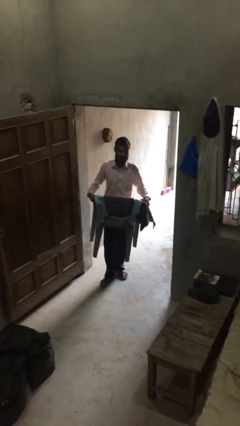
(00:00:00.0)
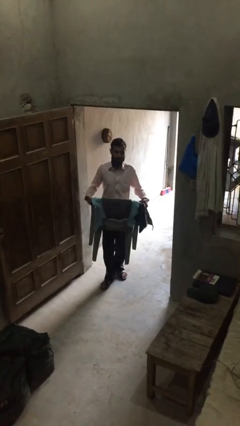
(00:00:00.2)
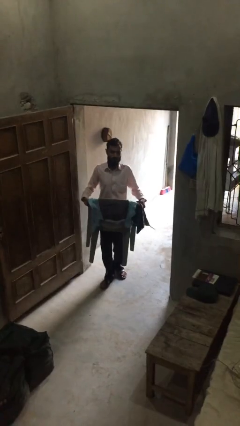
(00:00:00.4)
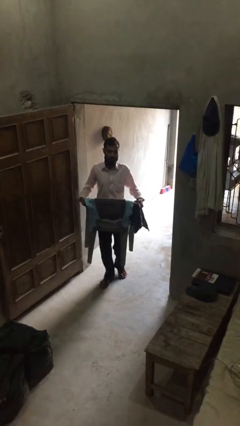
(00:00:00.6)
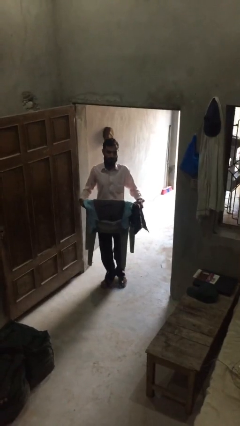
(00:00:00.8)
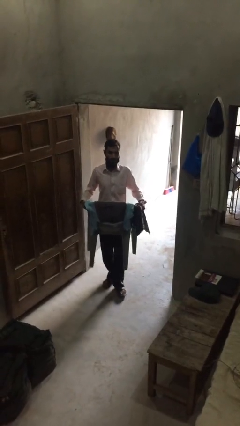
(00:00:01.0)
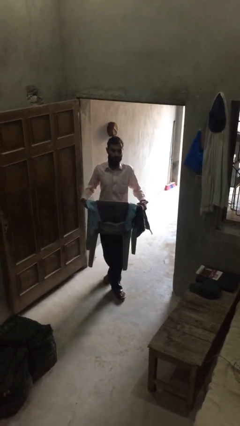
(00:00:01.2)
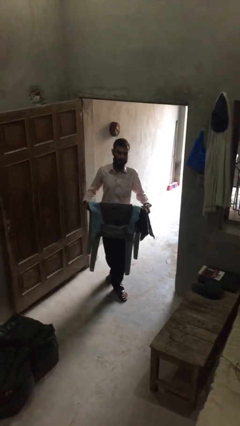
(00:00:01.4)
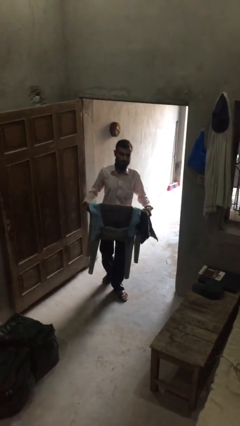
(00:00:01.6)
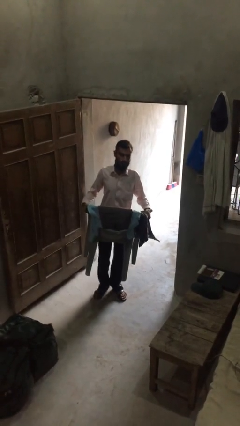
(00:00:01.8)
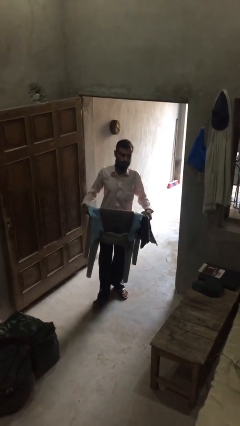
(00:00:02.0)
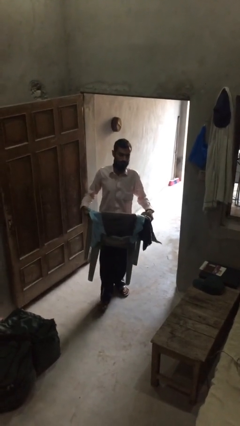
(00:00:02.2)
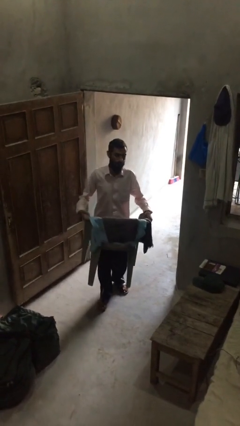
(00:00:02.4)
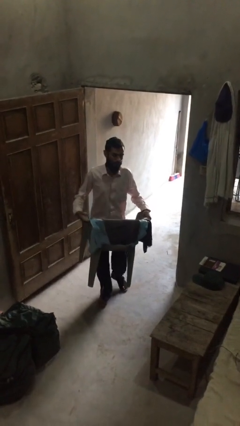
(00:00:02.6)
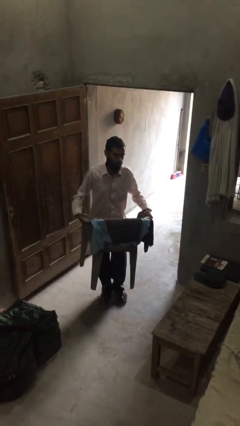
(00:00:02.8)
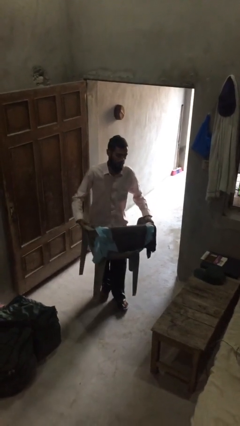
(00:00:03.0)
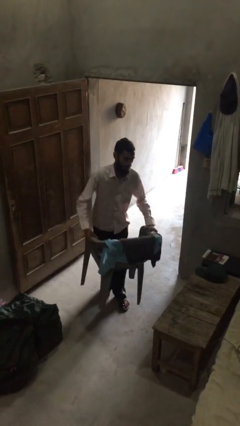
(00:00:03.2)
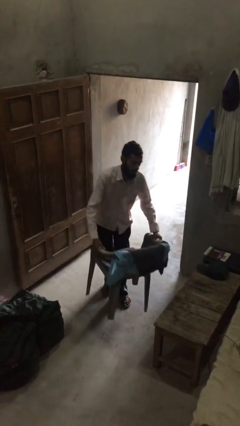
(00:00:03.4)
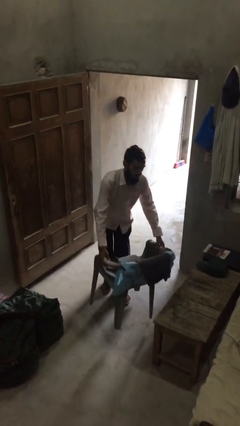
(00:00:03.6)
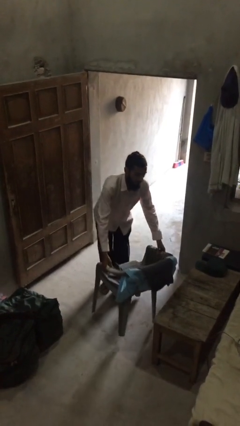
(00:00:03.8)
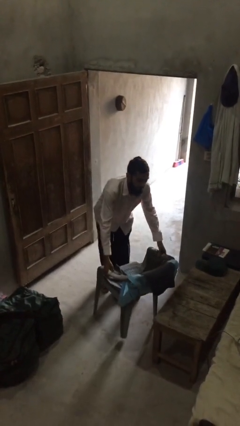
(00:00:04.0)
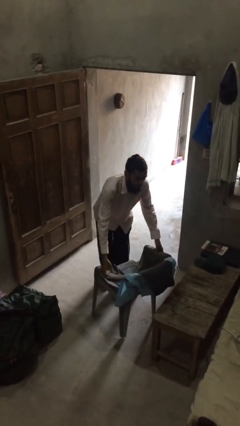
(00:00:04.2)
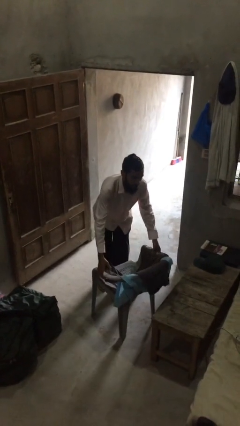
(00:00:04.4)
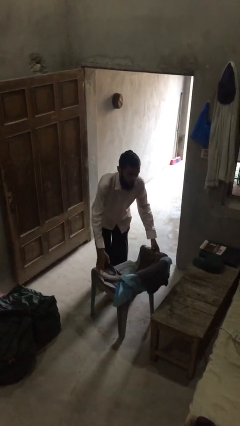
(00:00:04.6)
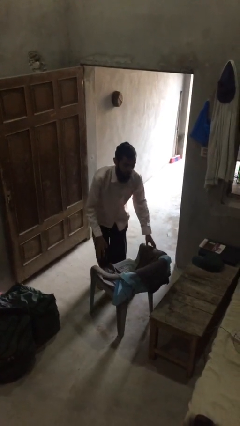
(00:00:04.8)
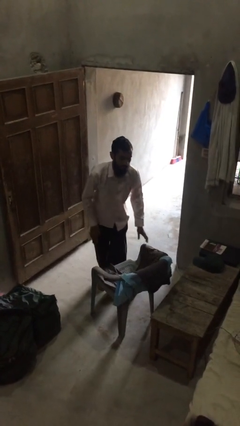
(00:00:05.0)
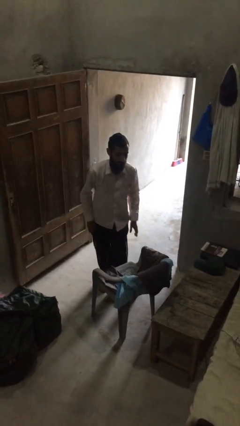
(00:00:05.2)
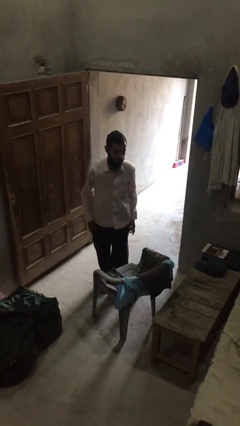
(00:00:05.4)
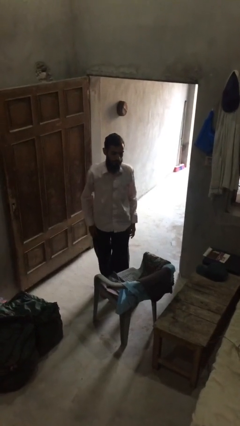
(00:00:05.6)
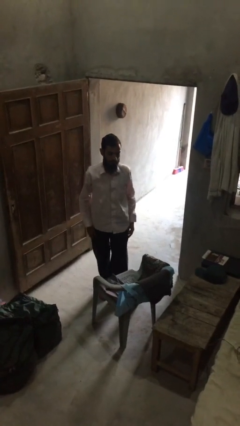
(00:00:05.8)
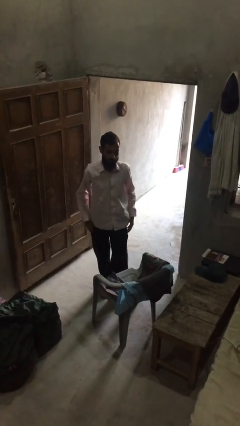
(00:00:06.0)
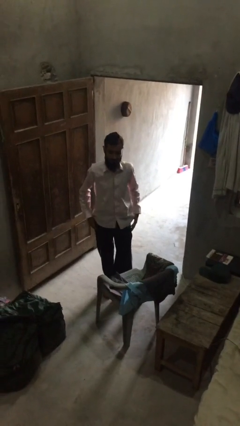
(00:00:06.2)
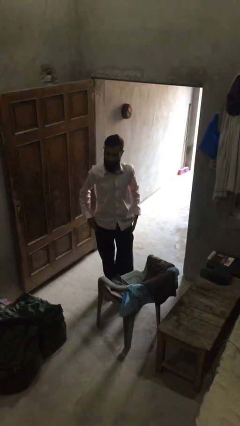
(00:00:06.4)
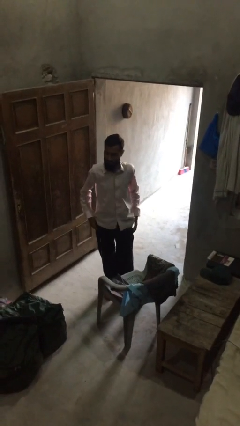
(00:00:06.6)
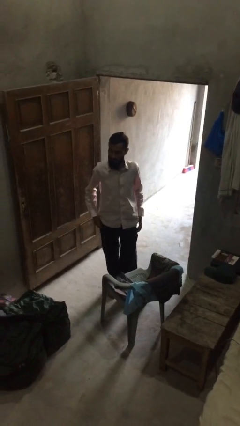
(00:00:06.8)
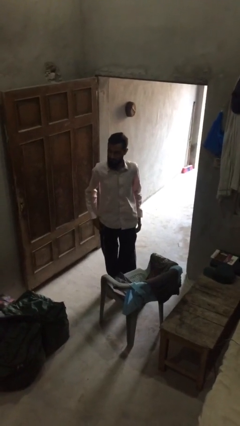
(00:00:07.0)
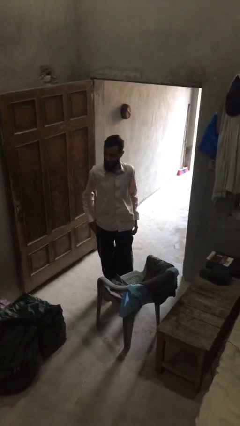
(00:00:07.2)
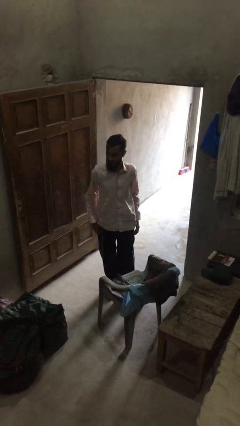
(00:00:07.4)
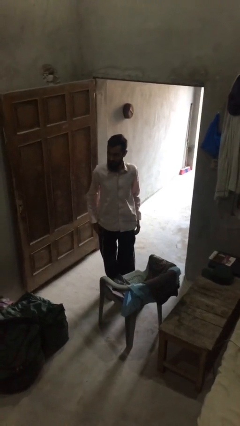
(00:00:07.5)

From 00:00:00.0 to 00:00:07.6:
person puts down object on floor

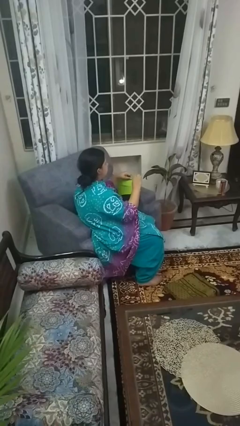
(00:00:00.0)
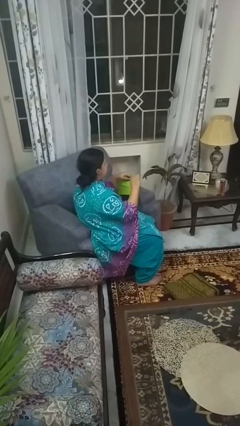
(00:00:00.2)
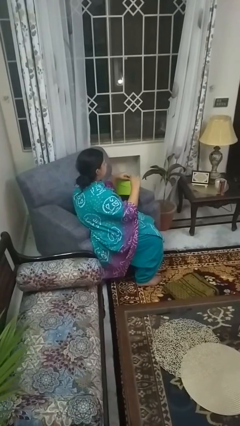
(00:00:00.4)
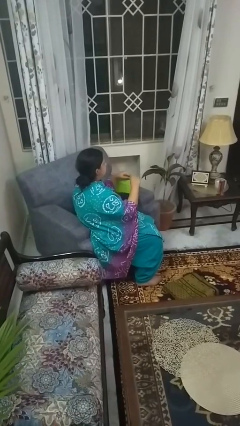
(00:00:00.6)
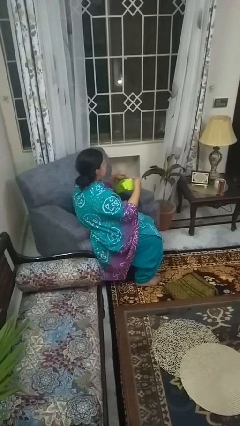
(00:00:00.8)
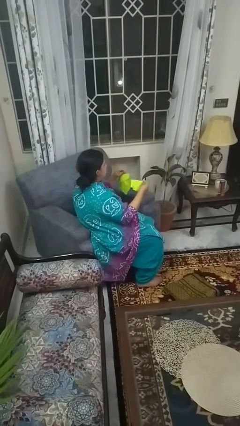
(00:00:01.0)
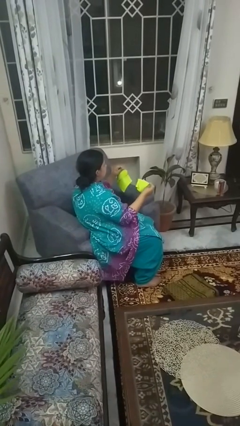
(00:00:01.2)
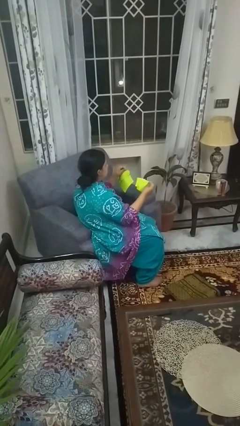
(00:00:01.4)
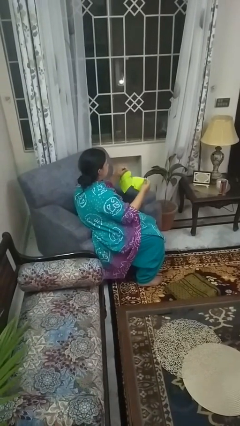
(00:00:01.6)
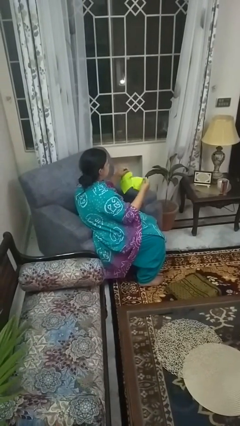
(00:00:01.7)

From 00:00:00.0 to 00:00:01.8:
person tears paper

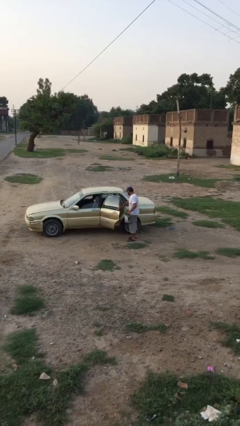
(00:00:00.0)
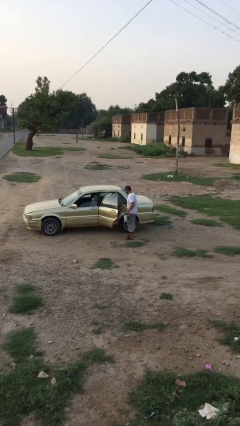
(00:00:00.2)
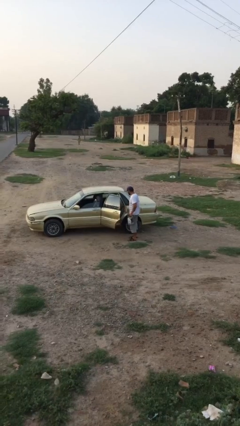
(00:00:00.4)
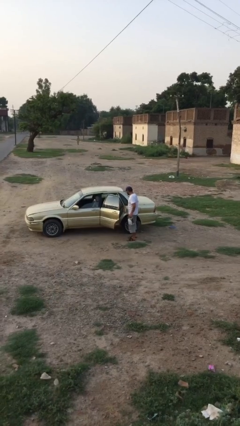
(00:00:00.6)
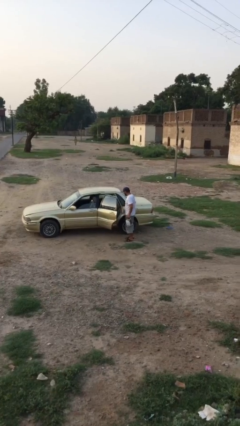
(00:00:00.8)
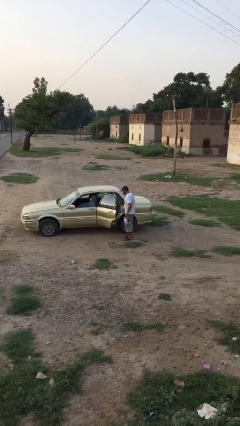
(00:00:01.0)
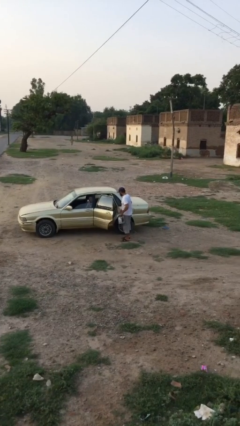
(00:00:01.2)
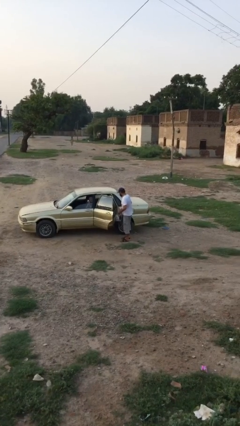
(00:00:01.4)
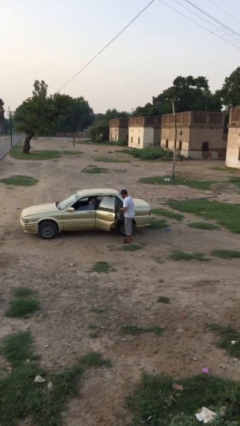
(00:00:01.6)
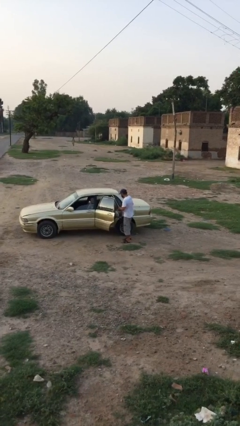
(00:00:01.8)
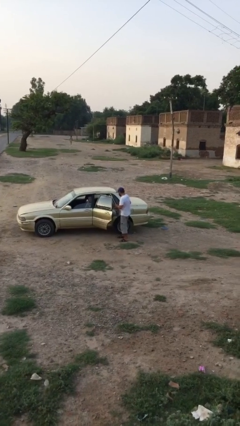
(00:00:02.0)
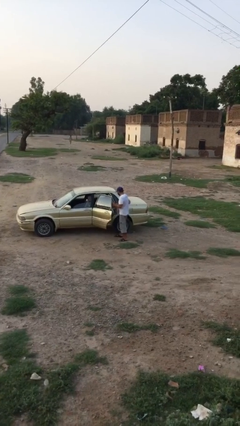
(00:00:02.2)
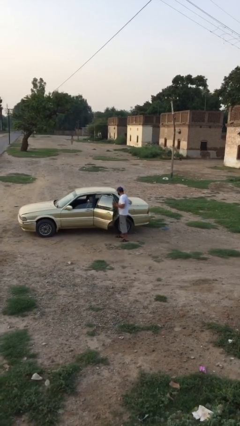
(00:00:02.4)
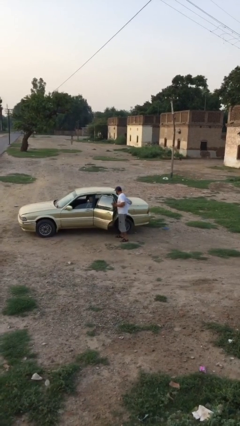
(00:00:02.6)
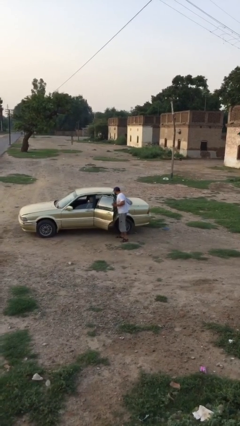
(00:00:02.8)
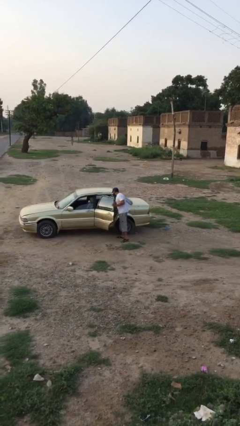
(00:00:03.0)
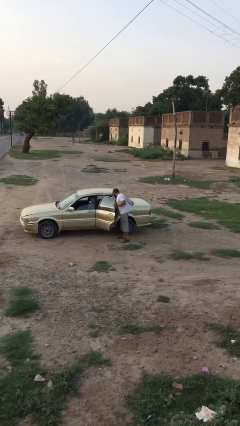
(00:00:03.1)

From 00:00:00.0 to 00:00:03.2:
person loads car

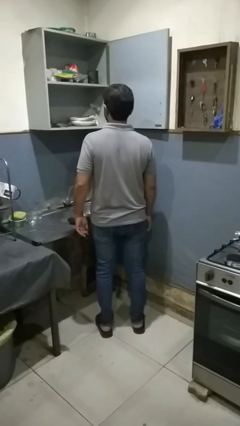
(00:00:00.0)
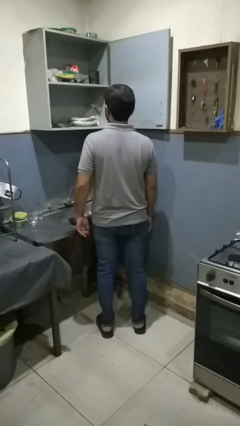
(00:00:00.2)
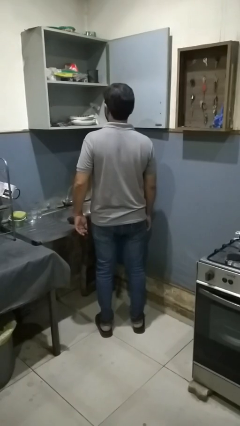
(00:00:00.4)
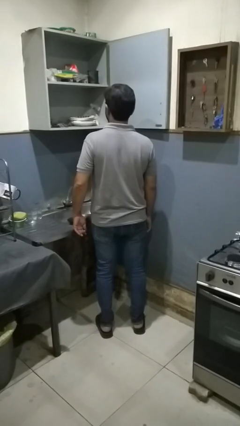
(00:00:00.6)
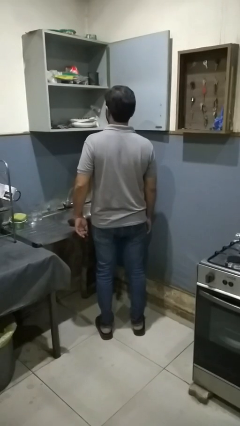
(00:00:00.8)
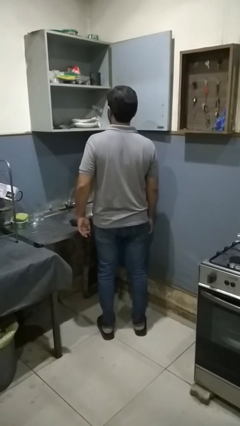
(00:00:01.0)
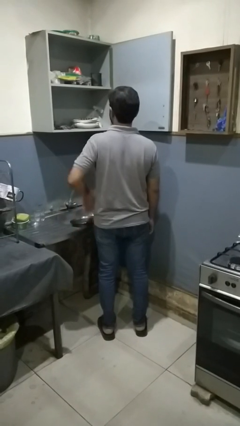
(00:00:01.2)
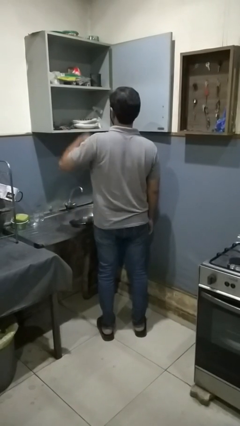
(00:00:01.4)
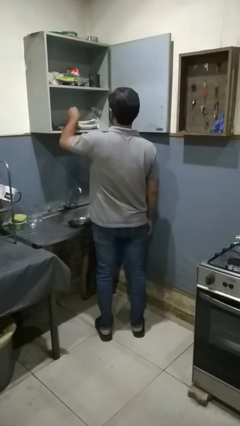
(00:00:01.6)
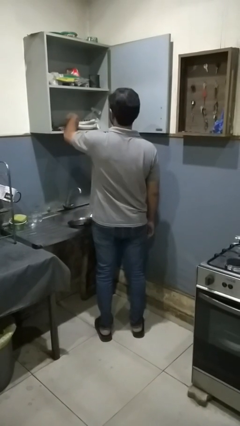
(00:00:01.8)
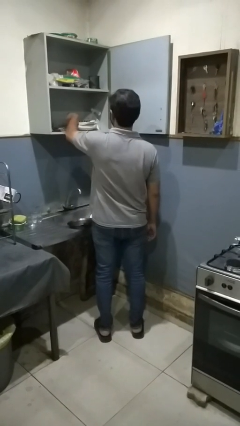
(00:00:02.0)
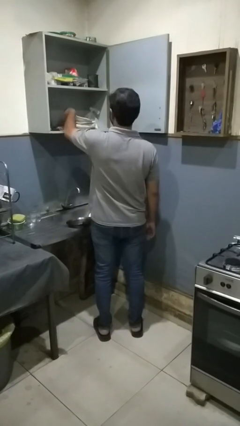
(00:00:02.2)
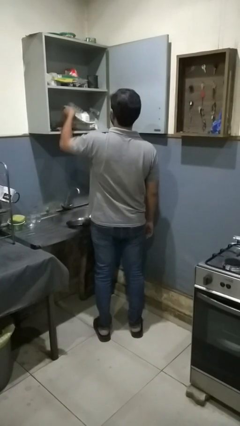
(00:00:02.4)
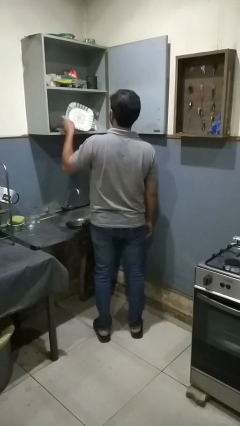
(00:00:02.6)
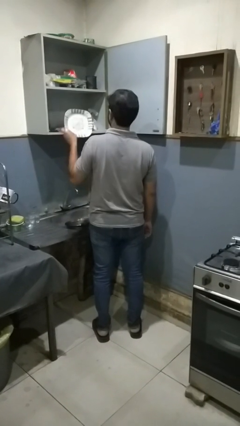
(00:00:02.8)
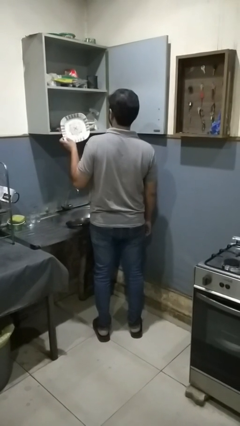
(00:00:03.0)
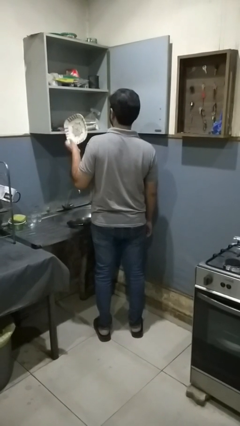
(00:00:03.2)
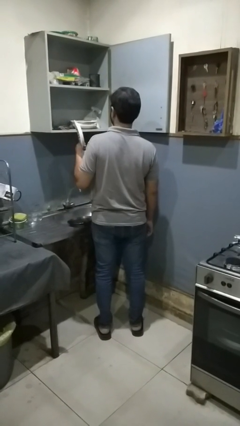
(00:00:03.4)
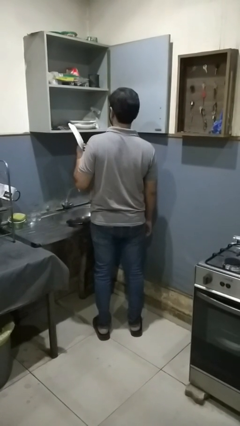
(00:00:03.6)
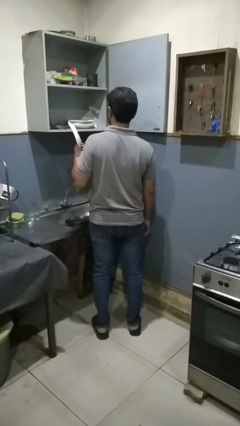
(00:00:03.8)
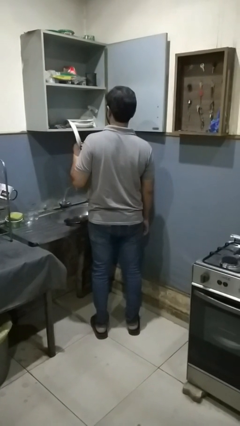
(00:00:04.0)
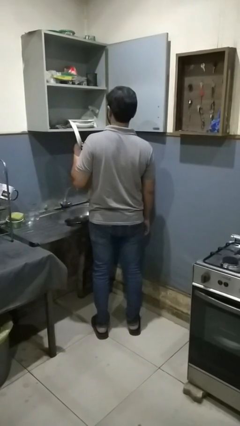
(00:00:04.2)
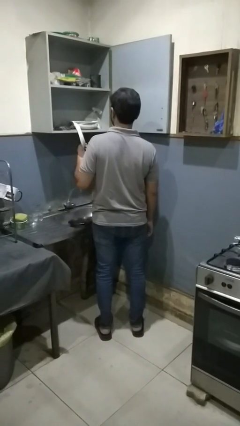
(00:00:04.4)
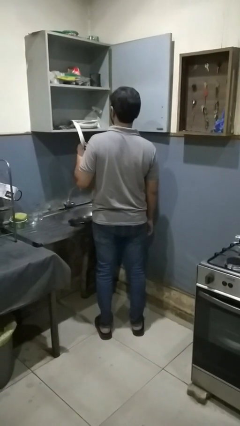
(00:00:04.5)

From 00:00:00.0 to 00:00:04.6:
person takes object from kitchen drawer

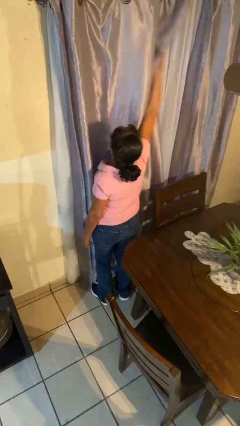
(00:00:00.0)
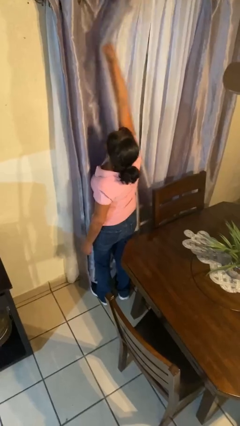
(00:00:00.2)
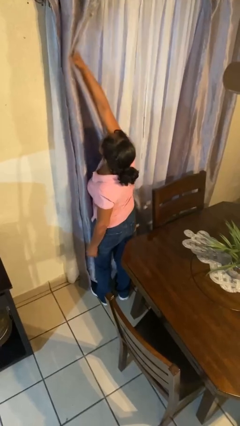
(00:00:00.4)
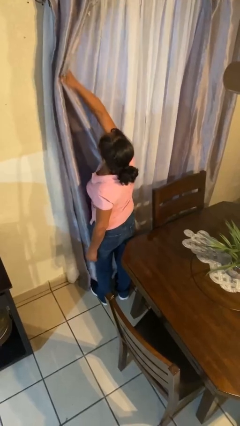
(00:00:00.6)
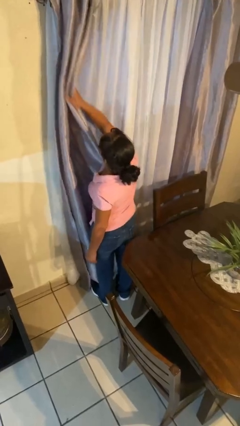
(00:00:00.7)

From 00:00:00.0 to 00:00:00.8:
person opens curtains
